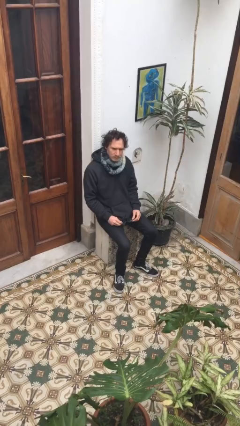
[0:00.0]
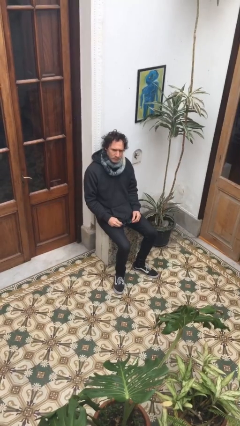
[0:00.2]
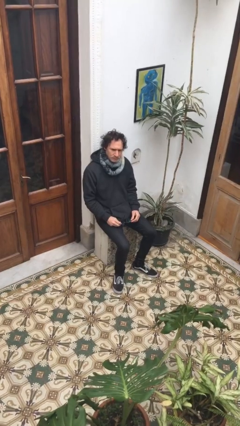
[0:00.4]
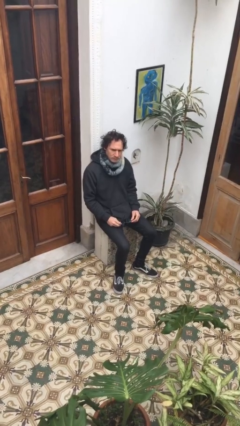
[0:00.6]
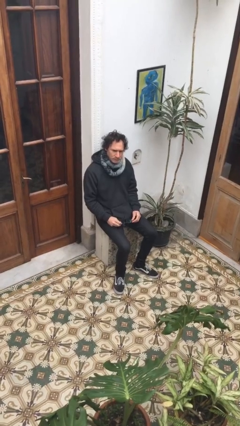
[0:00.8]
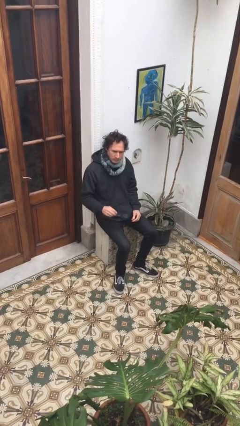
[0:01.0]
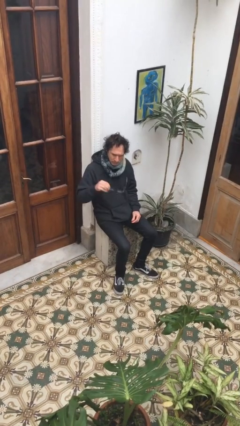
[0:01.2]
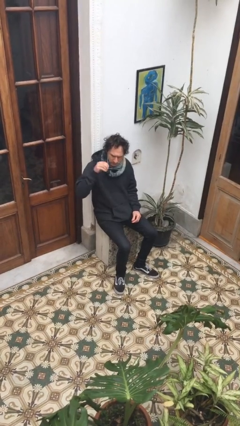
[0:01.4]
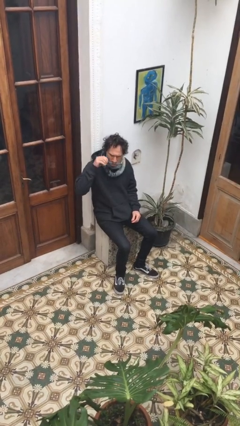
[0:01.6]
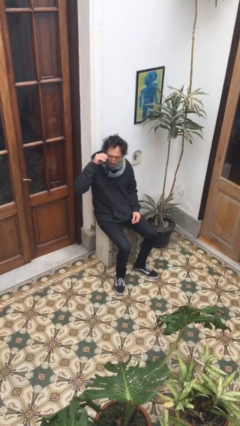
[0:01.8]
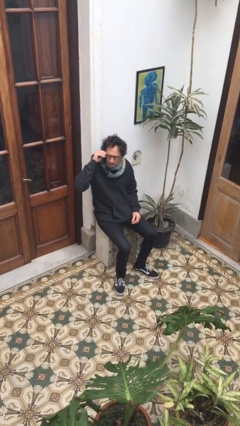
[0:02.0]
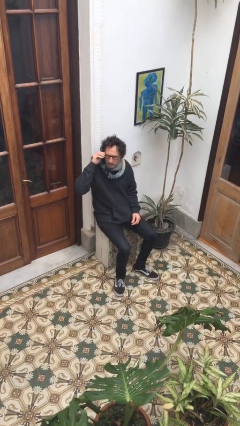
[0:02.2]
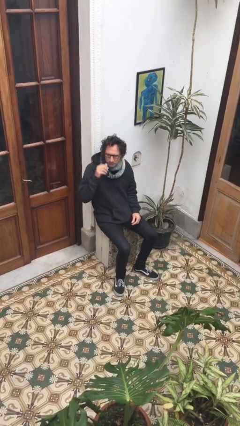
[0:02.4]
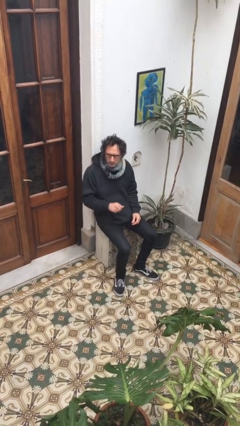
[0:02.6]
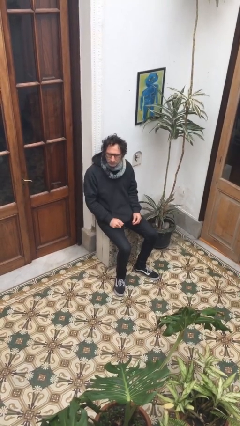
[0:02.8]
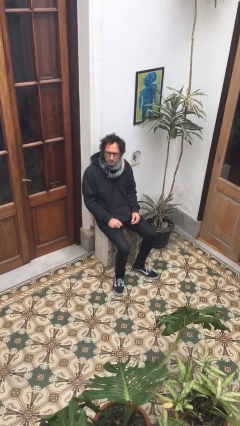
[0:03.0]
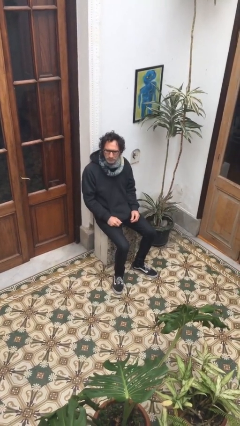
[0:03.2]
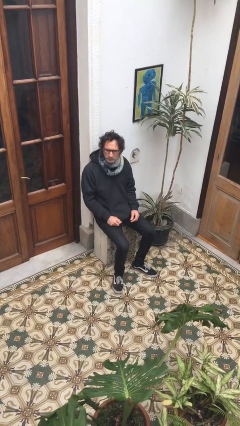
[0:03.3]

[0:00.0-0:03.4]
person puts on glasses

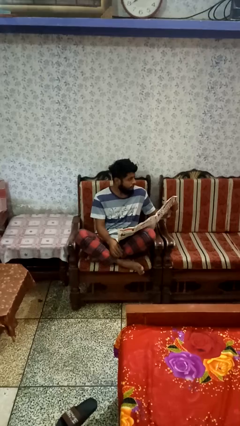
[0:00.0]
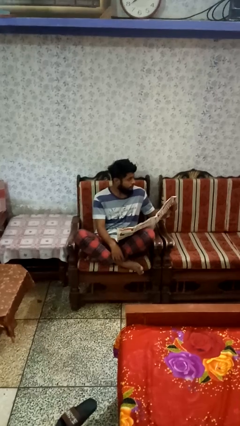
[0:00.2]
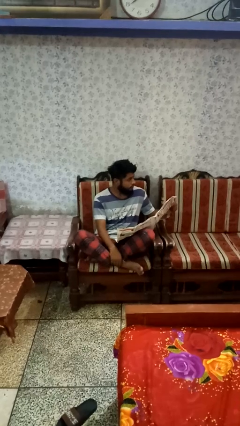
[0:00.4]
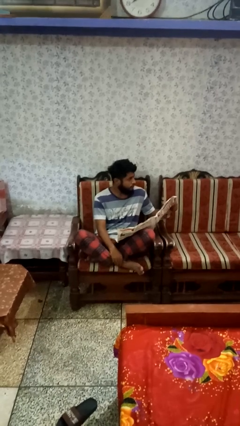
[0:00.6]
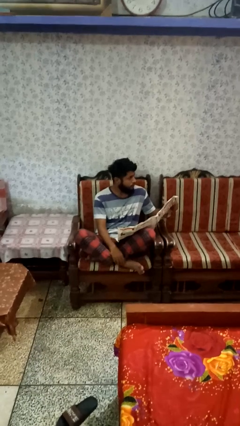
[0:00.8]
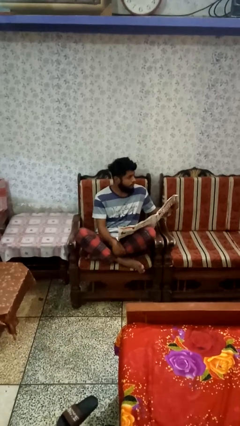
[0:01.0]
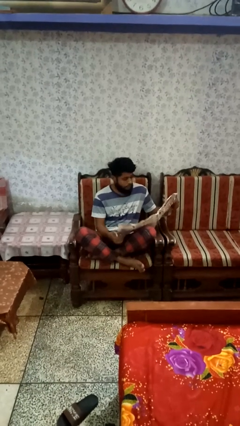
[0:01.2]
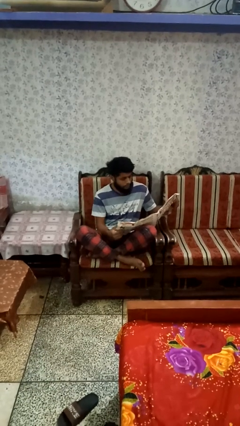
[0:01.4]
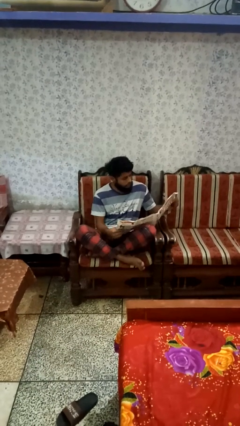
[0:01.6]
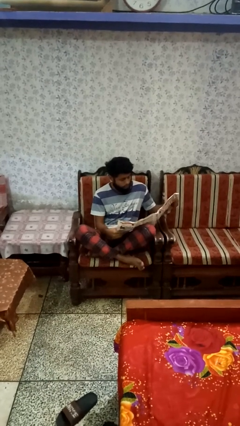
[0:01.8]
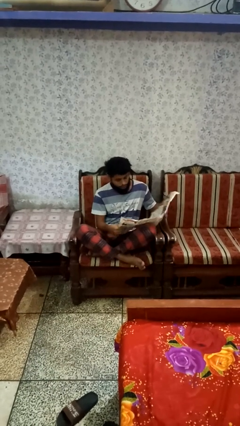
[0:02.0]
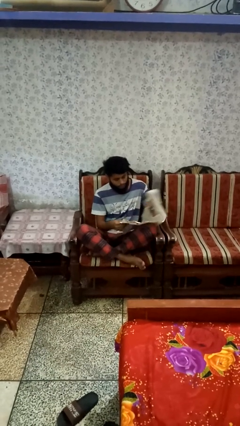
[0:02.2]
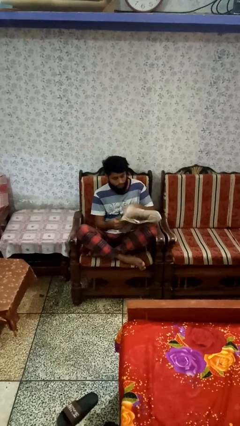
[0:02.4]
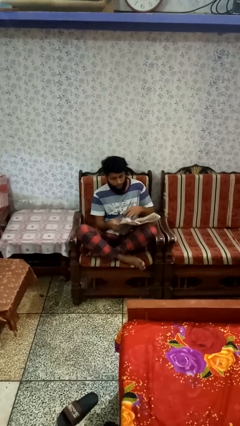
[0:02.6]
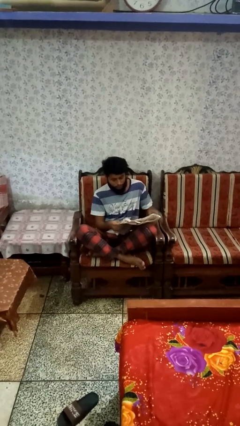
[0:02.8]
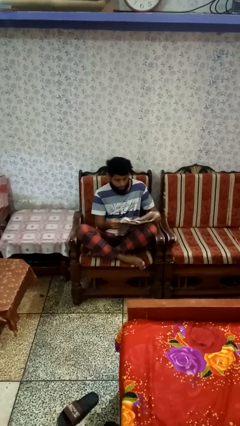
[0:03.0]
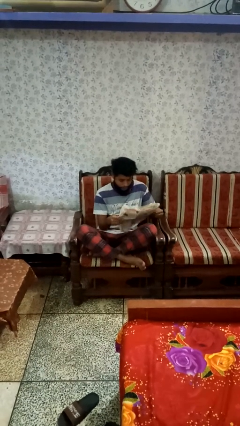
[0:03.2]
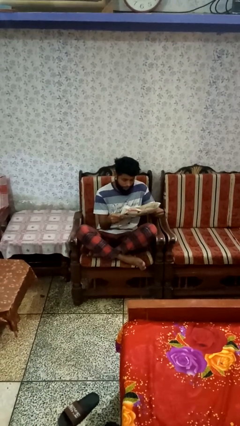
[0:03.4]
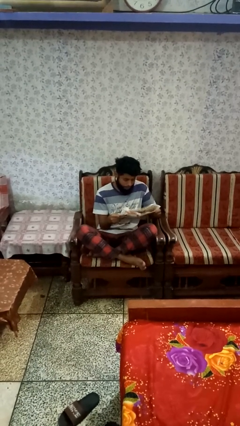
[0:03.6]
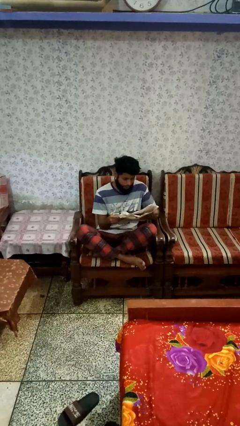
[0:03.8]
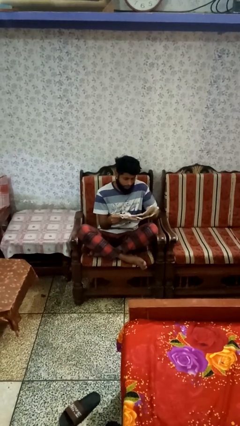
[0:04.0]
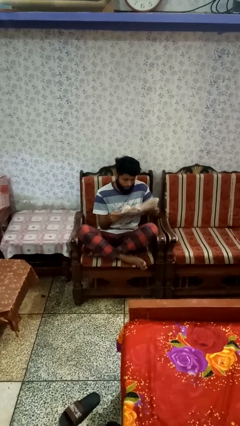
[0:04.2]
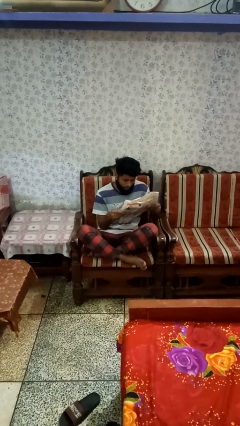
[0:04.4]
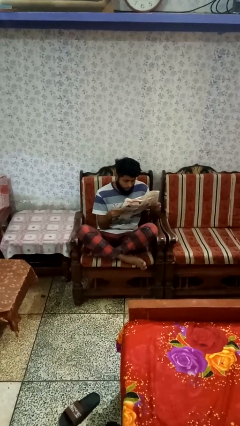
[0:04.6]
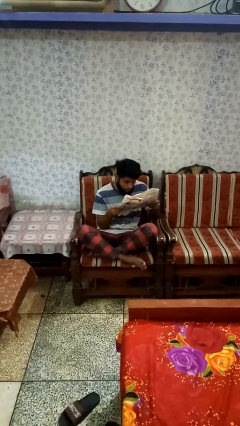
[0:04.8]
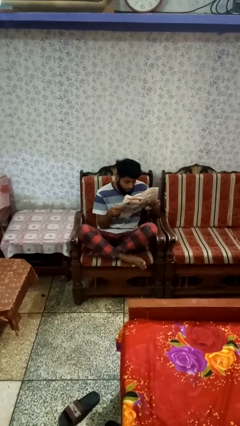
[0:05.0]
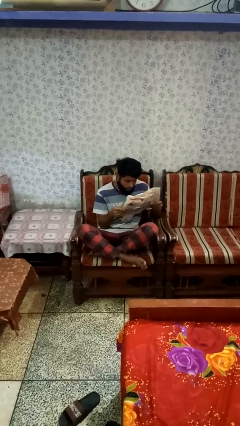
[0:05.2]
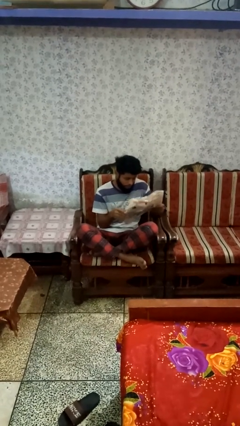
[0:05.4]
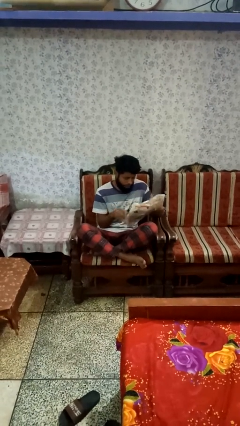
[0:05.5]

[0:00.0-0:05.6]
person reads newspaper

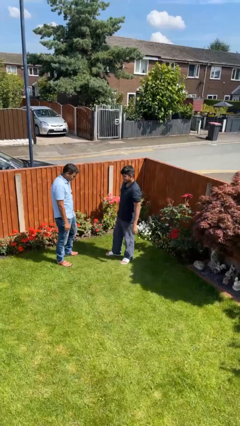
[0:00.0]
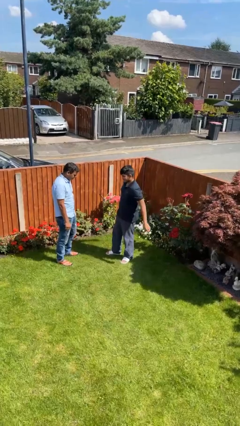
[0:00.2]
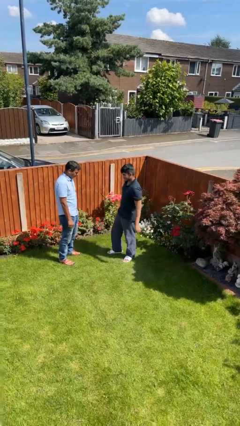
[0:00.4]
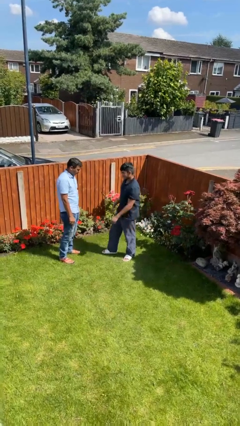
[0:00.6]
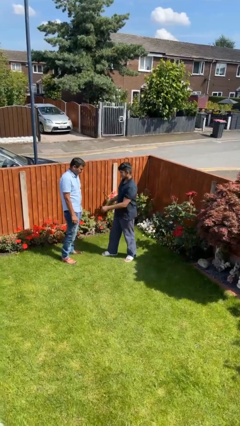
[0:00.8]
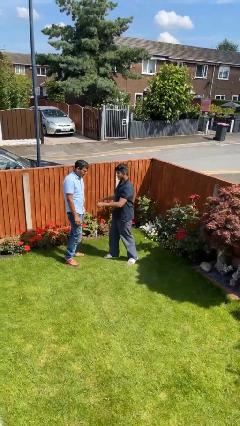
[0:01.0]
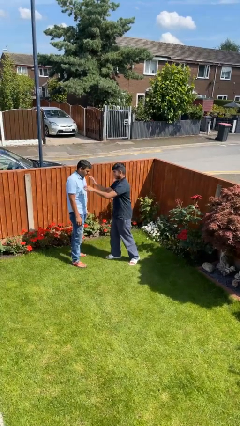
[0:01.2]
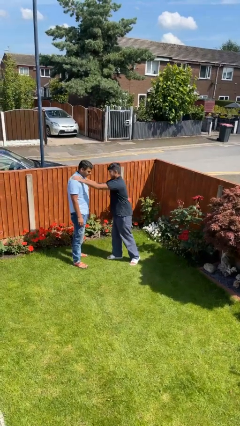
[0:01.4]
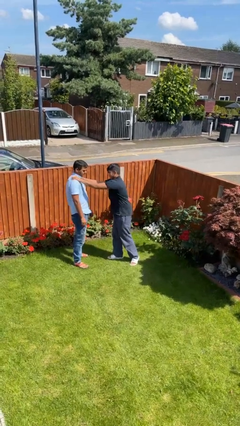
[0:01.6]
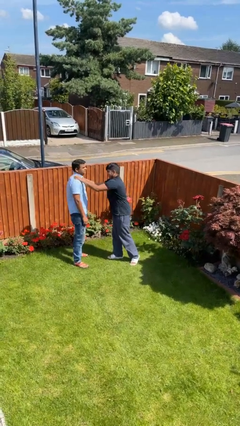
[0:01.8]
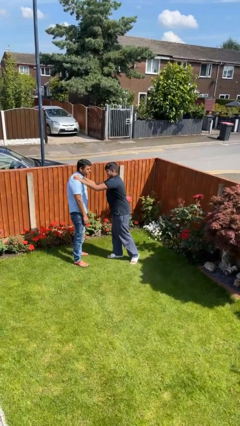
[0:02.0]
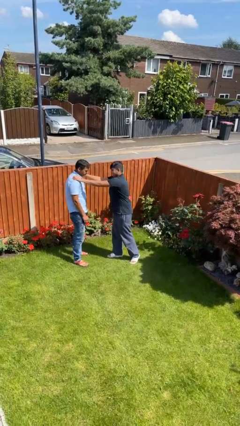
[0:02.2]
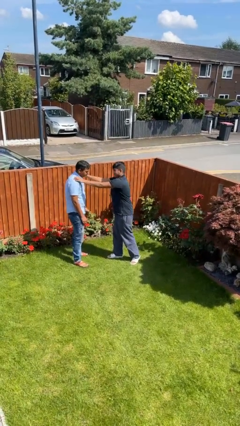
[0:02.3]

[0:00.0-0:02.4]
person pounds shoulders of person

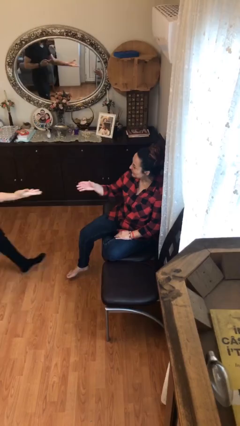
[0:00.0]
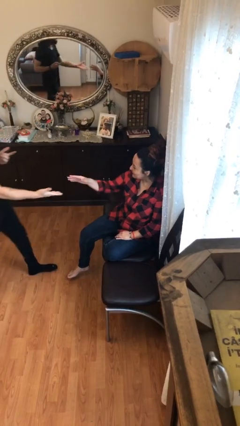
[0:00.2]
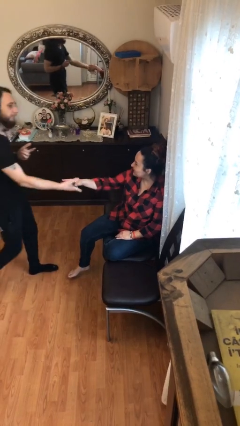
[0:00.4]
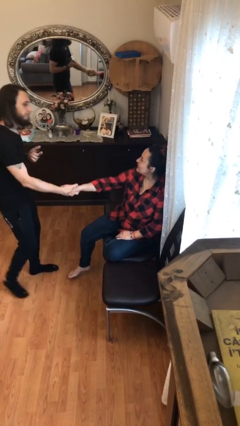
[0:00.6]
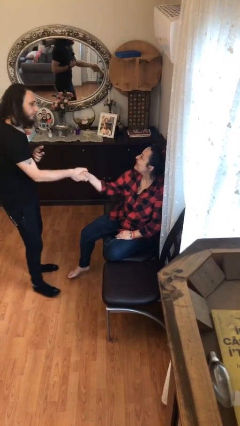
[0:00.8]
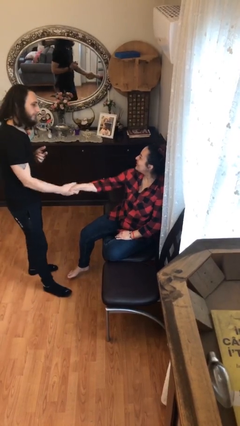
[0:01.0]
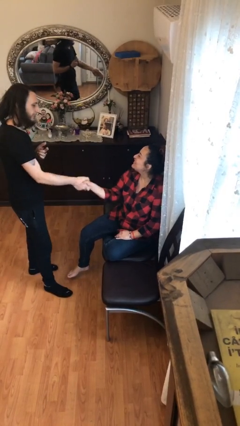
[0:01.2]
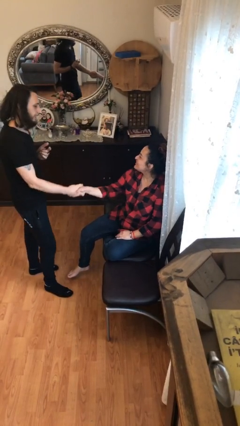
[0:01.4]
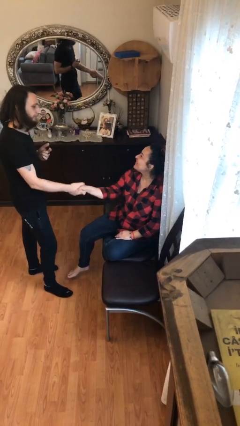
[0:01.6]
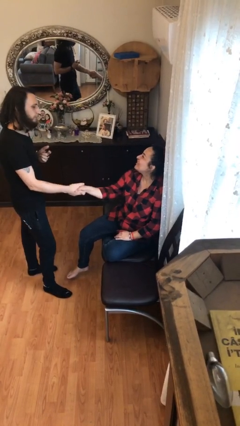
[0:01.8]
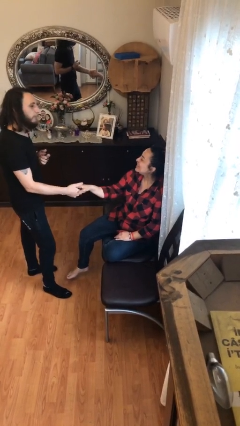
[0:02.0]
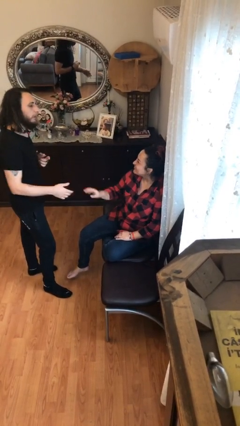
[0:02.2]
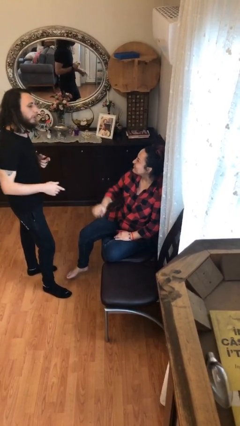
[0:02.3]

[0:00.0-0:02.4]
person shakes hand

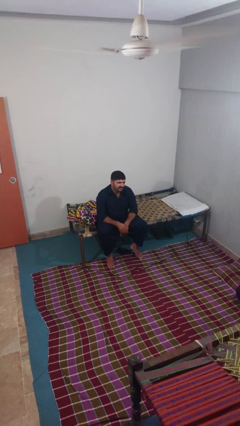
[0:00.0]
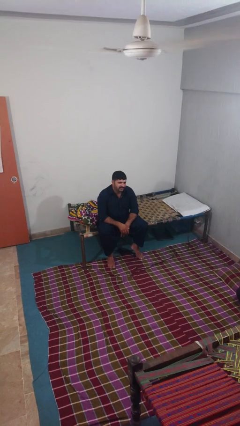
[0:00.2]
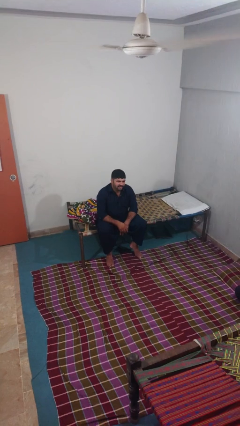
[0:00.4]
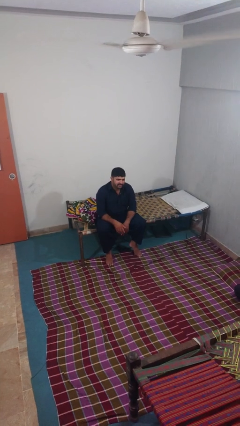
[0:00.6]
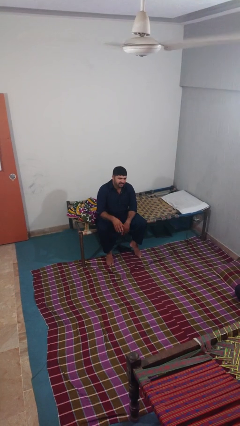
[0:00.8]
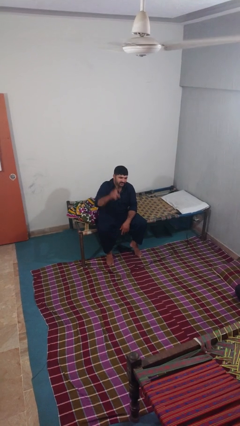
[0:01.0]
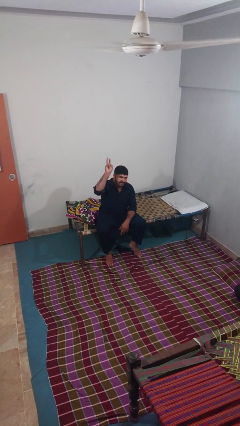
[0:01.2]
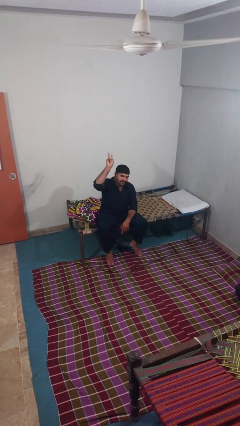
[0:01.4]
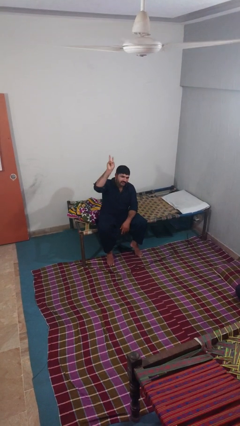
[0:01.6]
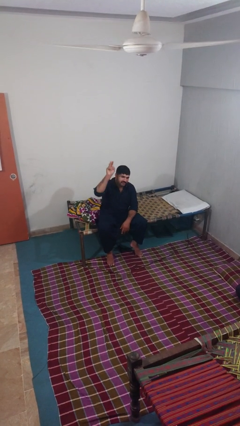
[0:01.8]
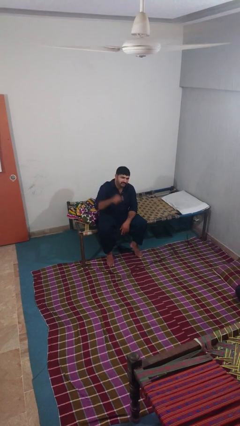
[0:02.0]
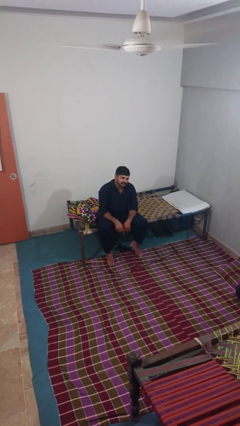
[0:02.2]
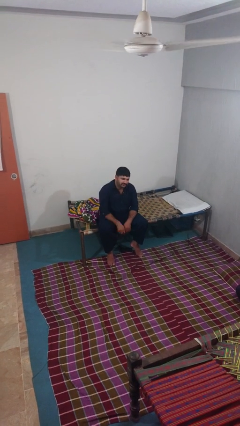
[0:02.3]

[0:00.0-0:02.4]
person gestures swipe up

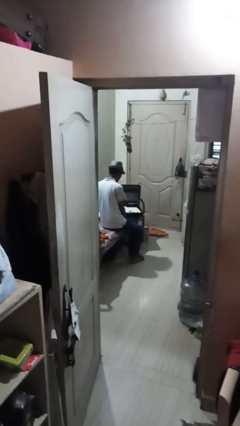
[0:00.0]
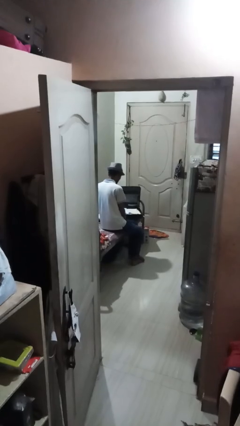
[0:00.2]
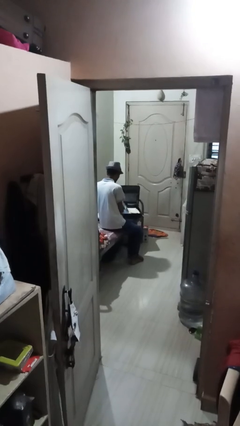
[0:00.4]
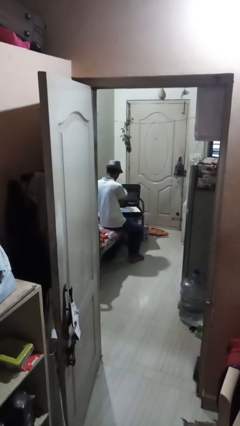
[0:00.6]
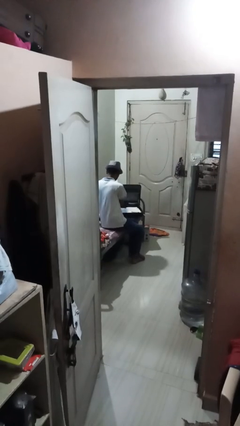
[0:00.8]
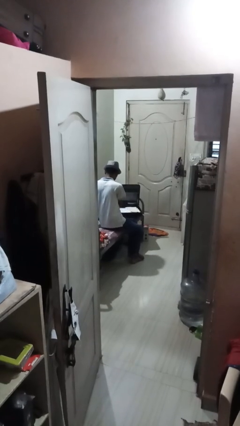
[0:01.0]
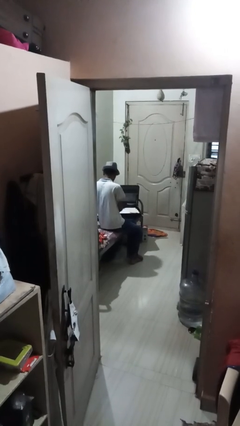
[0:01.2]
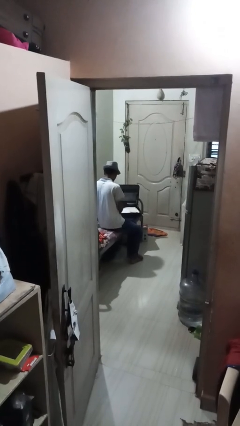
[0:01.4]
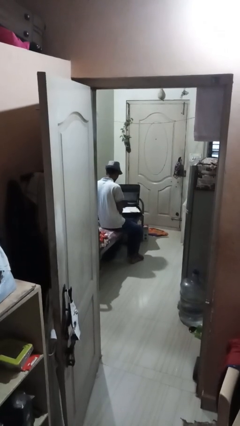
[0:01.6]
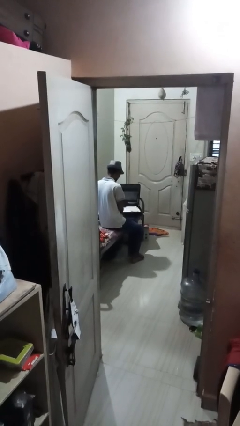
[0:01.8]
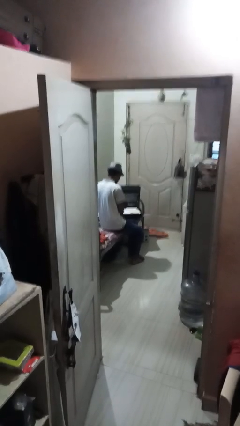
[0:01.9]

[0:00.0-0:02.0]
person unloads clothes from suitcase
